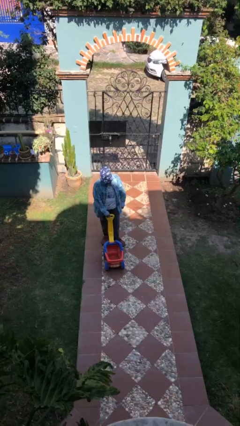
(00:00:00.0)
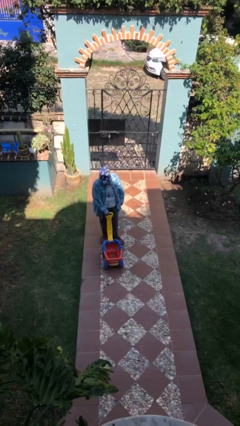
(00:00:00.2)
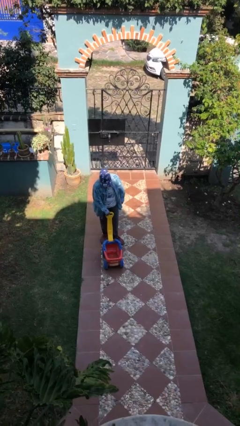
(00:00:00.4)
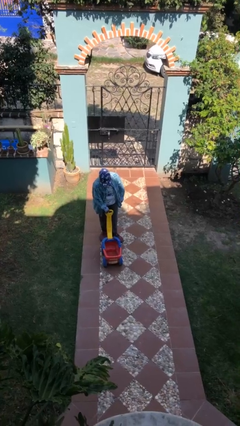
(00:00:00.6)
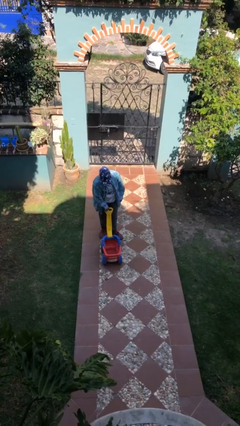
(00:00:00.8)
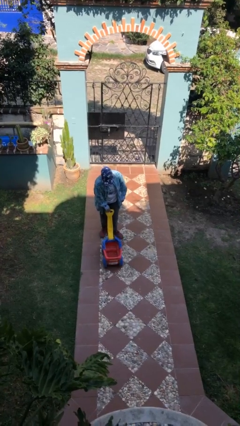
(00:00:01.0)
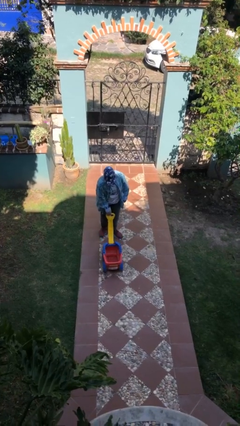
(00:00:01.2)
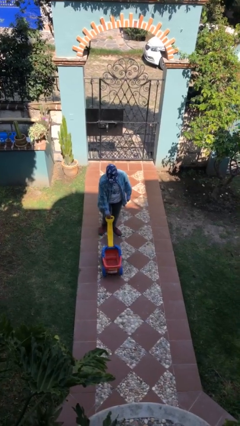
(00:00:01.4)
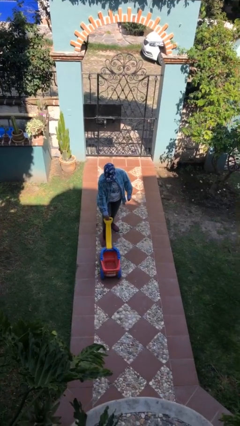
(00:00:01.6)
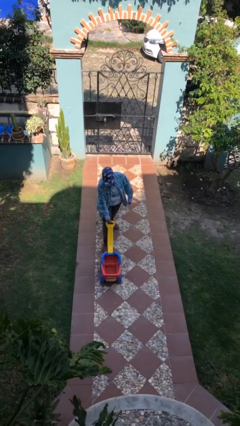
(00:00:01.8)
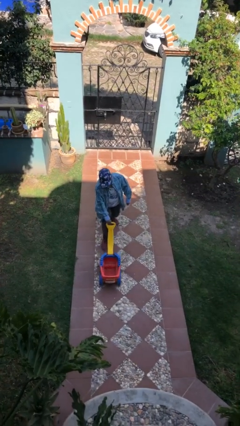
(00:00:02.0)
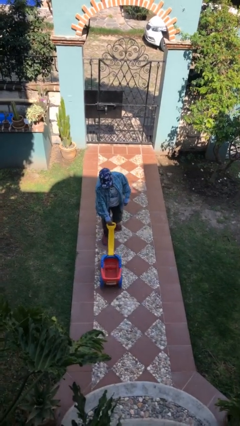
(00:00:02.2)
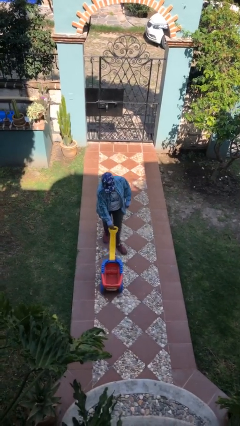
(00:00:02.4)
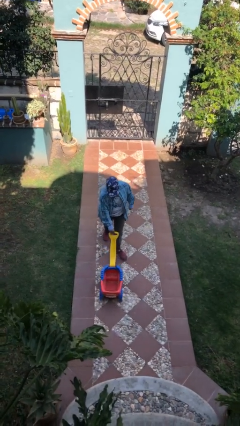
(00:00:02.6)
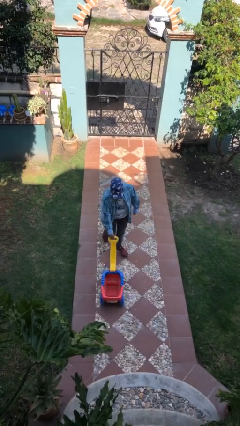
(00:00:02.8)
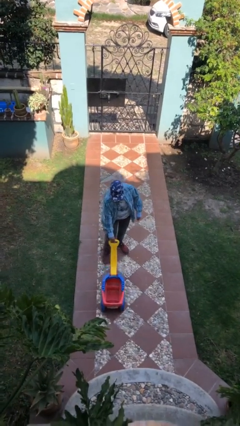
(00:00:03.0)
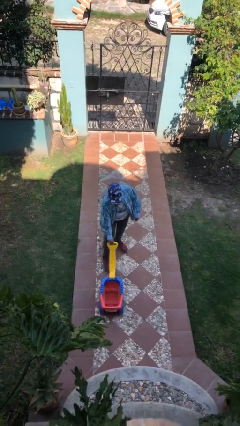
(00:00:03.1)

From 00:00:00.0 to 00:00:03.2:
person pushes wheeled cart

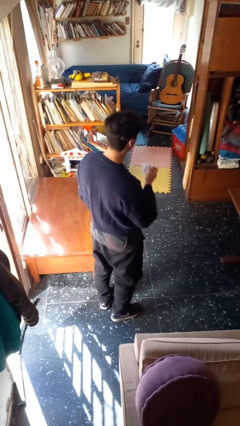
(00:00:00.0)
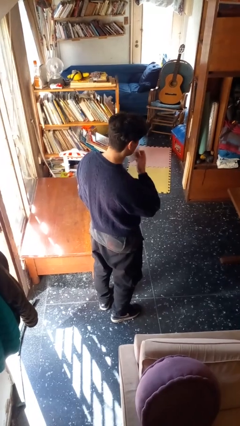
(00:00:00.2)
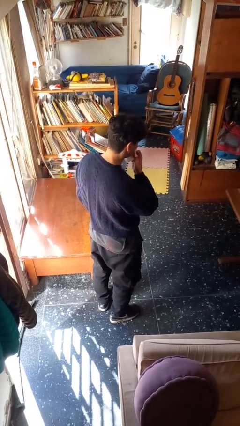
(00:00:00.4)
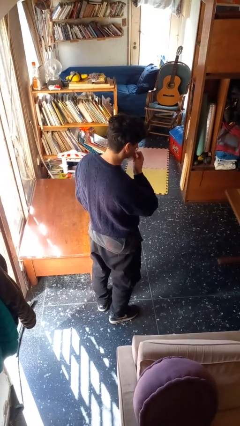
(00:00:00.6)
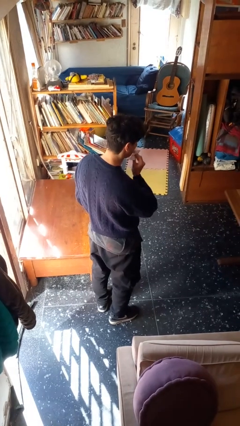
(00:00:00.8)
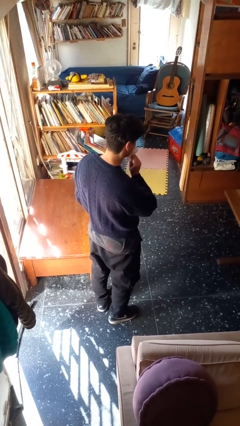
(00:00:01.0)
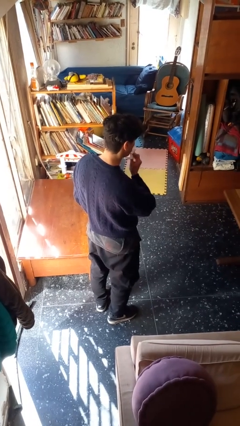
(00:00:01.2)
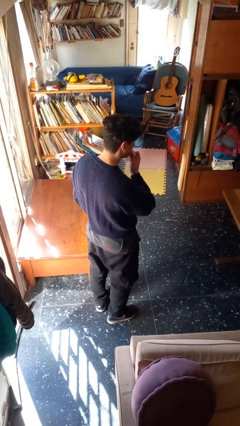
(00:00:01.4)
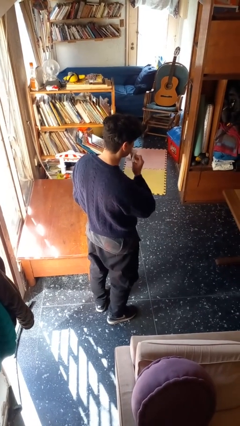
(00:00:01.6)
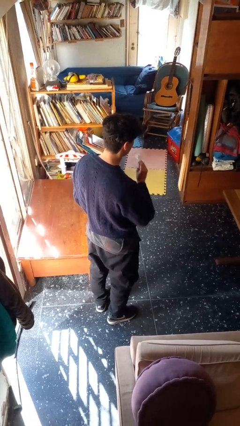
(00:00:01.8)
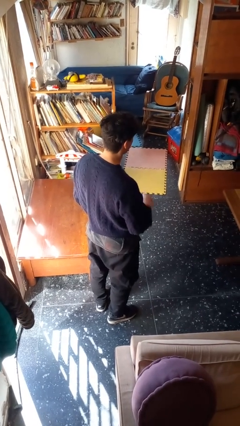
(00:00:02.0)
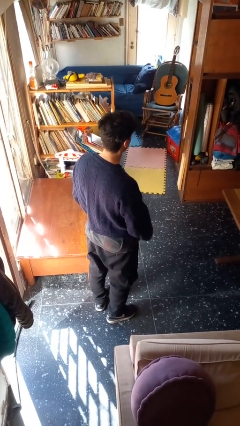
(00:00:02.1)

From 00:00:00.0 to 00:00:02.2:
person wipes mouth with napkin

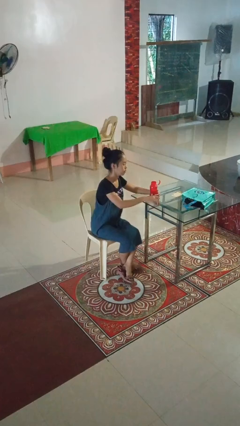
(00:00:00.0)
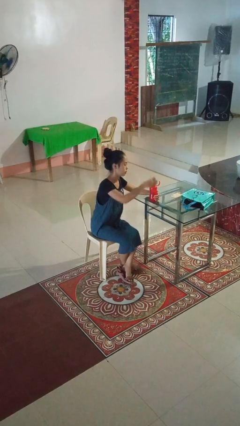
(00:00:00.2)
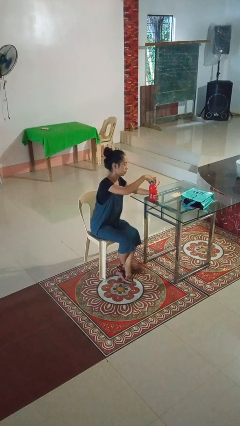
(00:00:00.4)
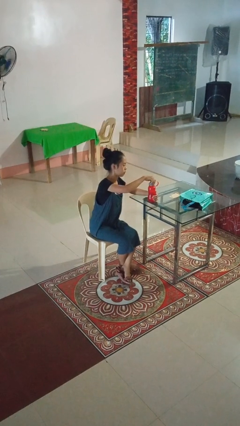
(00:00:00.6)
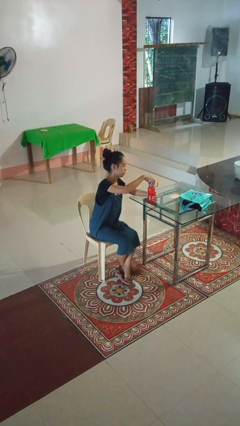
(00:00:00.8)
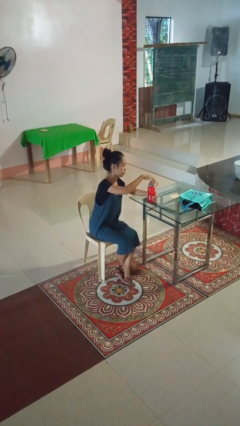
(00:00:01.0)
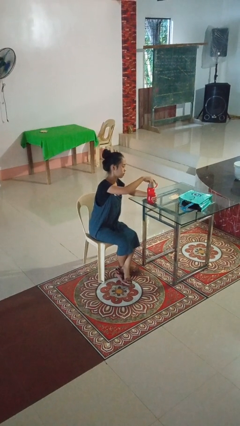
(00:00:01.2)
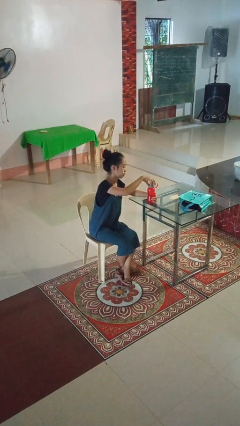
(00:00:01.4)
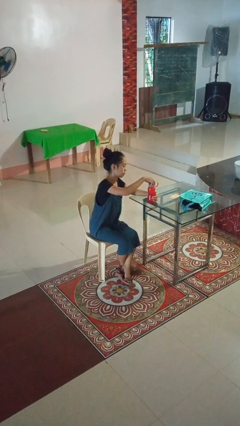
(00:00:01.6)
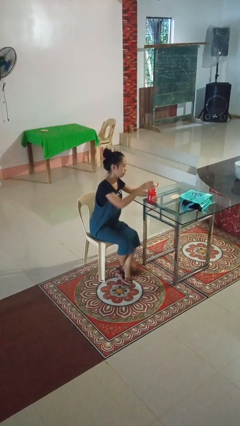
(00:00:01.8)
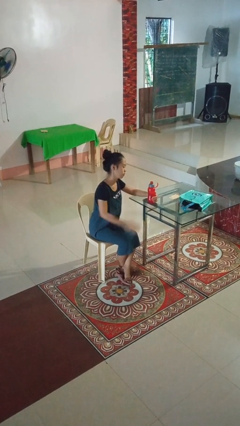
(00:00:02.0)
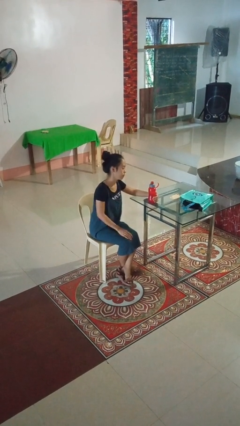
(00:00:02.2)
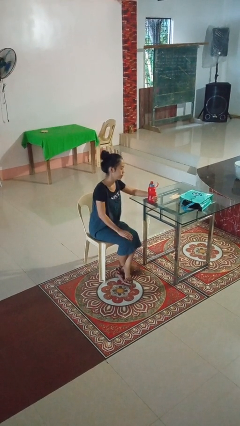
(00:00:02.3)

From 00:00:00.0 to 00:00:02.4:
person screws lid to bottle

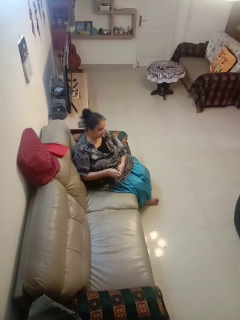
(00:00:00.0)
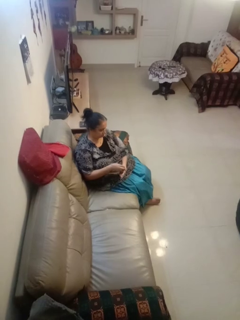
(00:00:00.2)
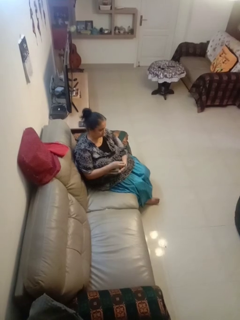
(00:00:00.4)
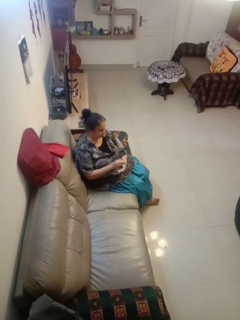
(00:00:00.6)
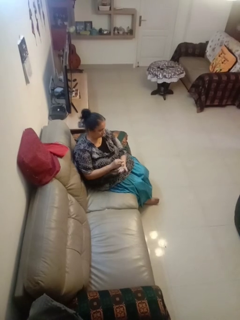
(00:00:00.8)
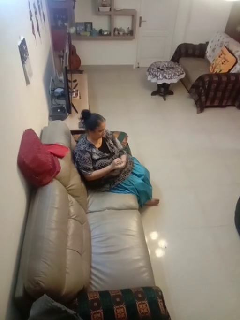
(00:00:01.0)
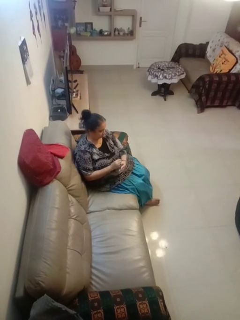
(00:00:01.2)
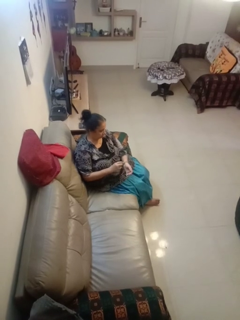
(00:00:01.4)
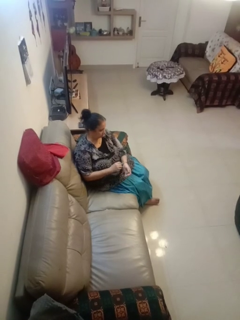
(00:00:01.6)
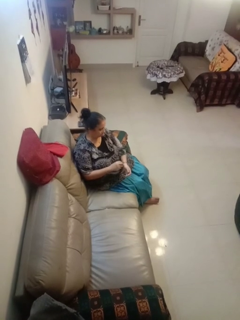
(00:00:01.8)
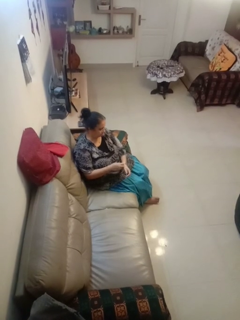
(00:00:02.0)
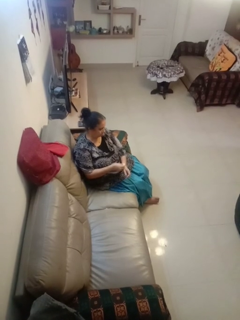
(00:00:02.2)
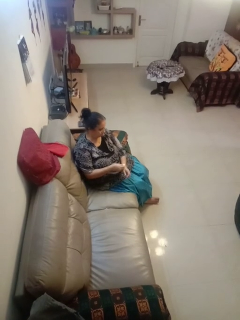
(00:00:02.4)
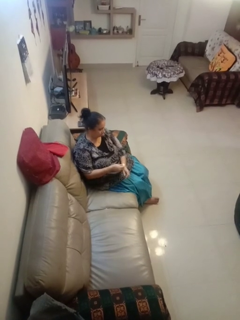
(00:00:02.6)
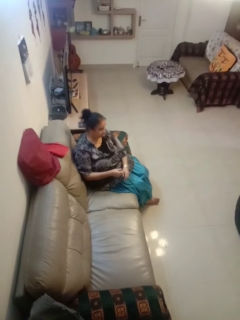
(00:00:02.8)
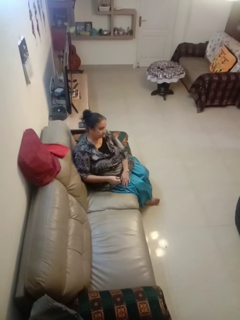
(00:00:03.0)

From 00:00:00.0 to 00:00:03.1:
person puts on wristwatch

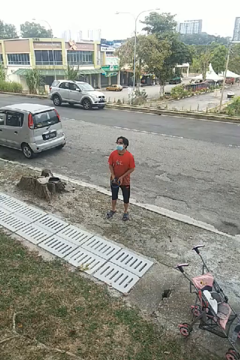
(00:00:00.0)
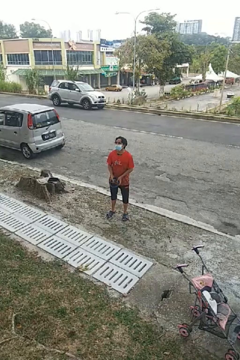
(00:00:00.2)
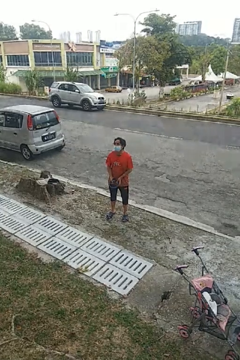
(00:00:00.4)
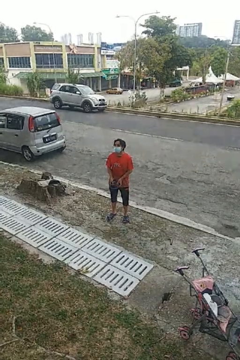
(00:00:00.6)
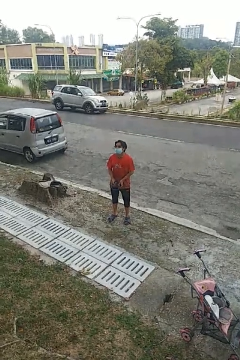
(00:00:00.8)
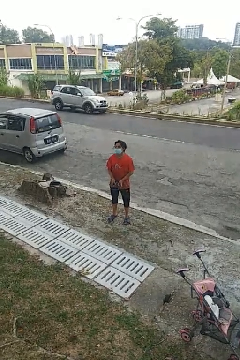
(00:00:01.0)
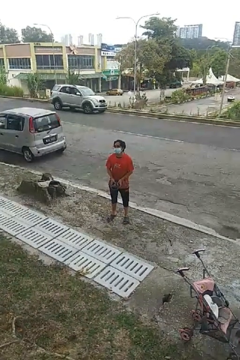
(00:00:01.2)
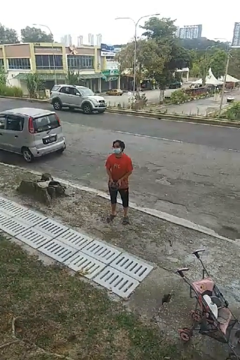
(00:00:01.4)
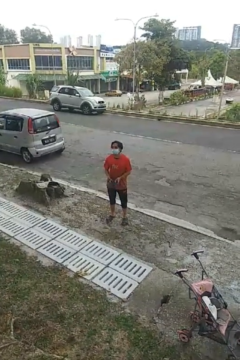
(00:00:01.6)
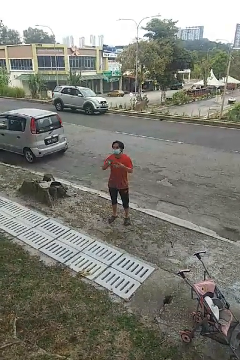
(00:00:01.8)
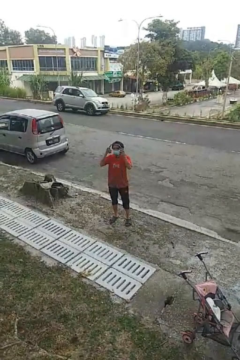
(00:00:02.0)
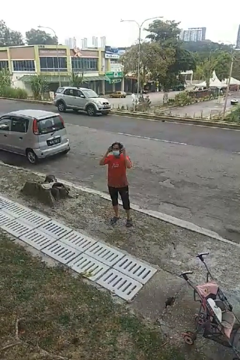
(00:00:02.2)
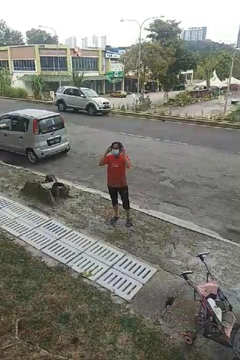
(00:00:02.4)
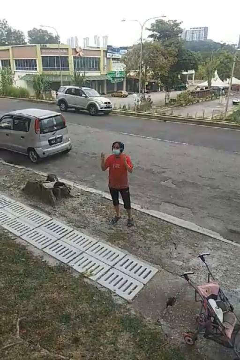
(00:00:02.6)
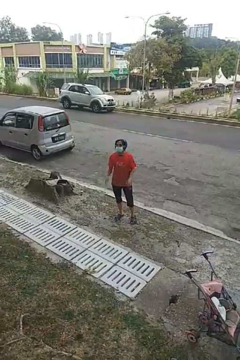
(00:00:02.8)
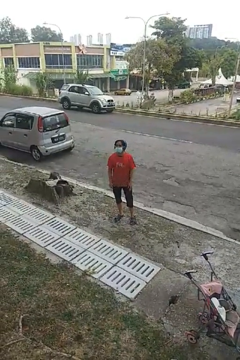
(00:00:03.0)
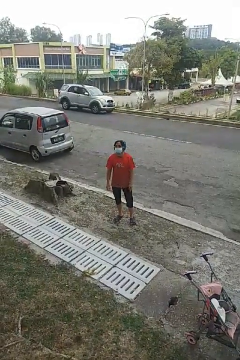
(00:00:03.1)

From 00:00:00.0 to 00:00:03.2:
person puts on headphones

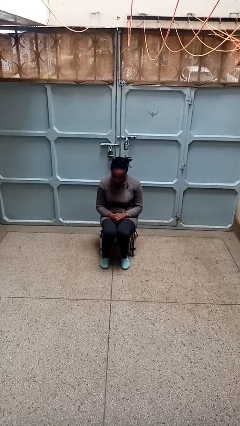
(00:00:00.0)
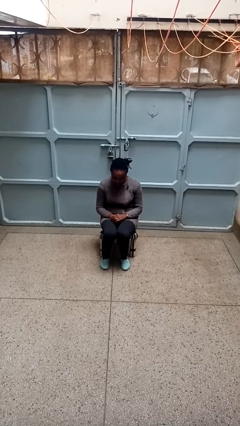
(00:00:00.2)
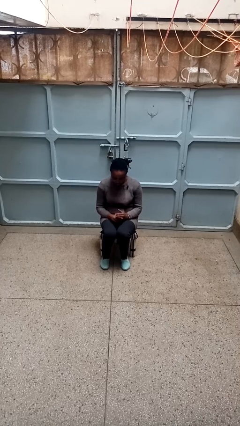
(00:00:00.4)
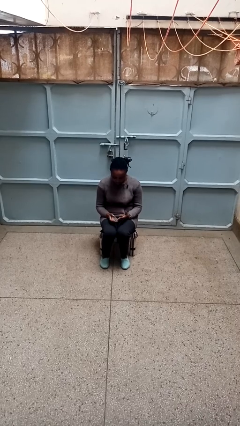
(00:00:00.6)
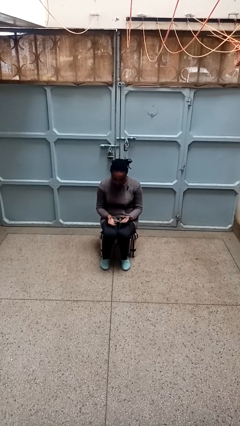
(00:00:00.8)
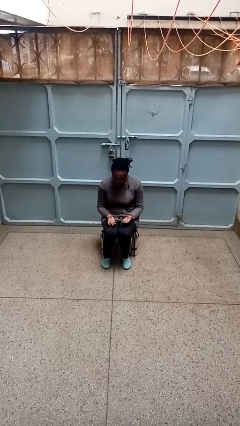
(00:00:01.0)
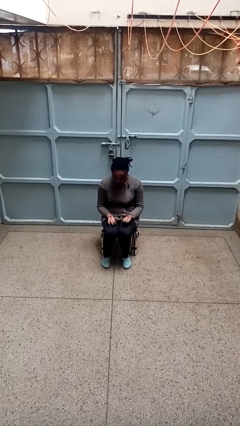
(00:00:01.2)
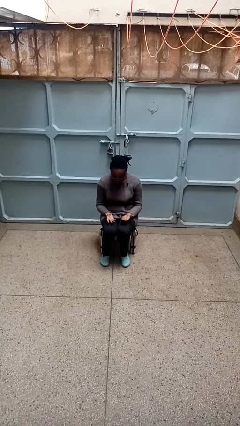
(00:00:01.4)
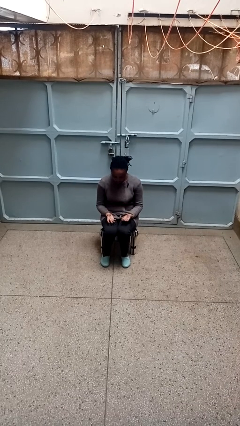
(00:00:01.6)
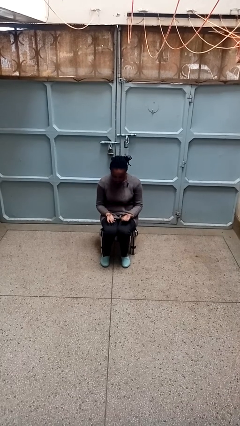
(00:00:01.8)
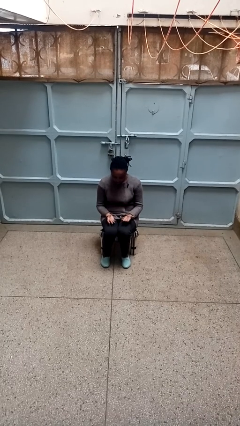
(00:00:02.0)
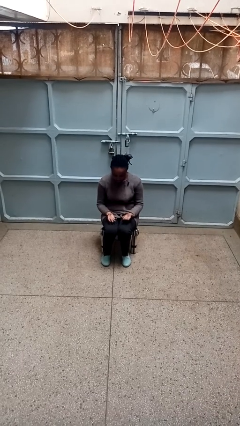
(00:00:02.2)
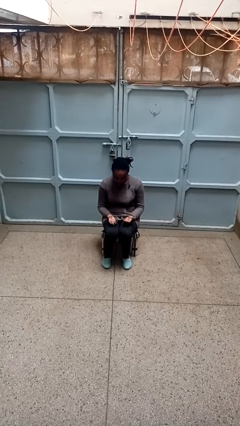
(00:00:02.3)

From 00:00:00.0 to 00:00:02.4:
person looks at hands in lap

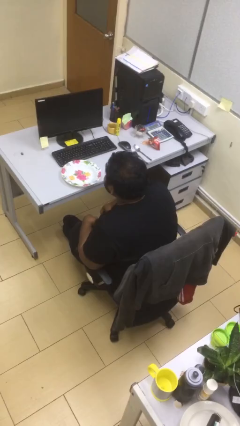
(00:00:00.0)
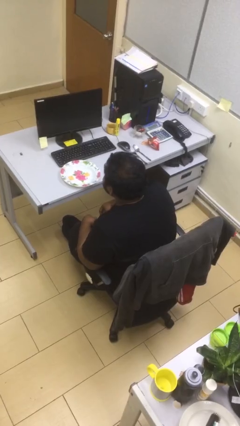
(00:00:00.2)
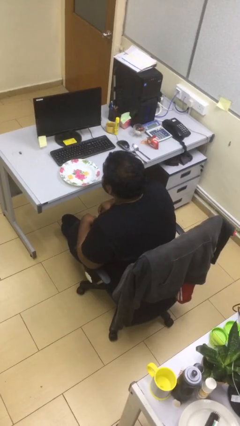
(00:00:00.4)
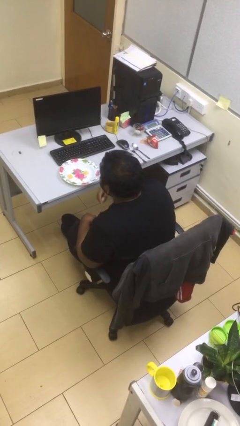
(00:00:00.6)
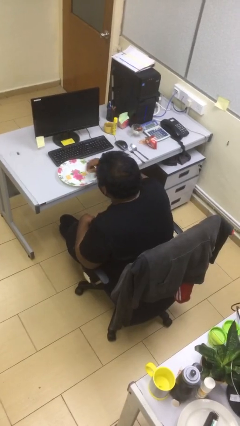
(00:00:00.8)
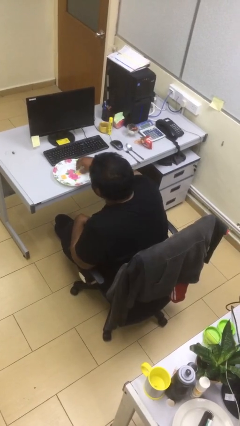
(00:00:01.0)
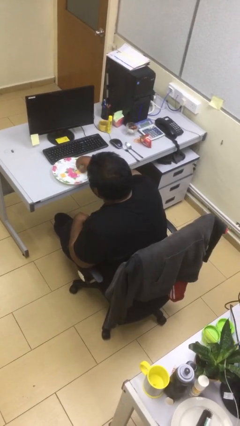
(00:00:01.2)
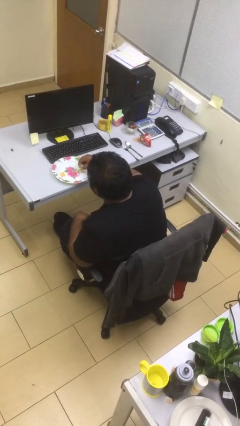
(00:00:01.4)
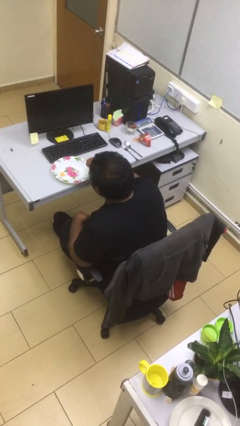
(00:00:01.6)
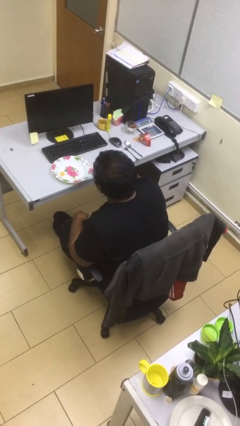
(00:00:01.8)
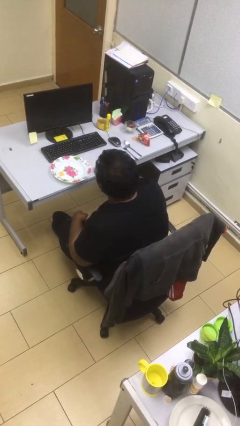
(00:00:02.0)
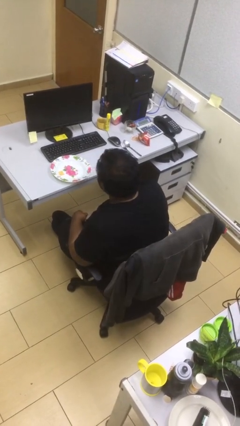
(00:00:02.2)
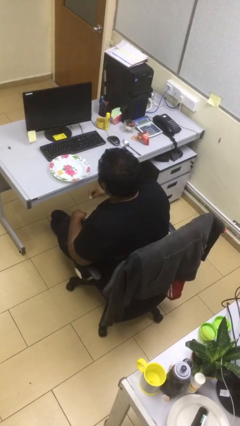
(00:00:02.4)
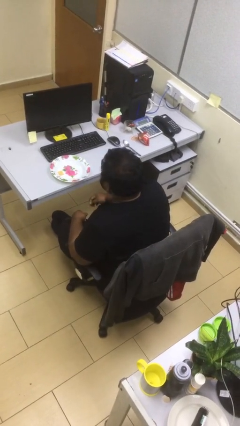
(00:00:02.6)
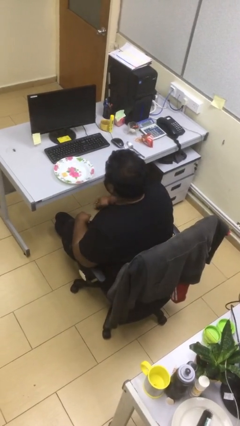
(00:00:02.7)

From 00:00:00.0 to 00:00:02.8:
person eats with hands
